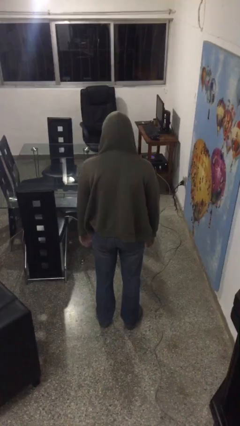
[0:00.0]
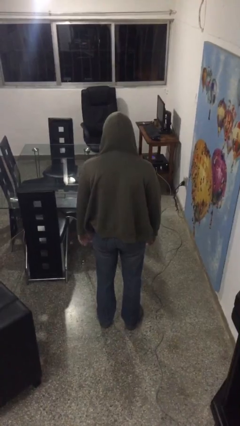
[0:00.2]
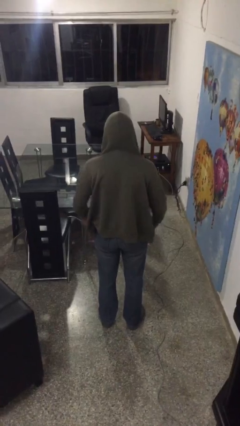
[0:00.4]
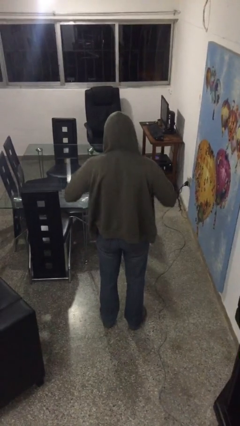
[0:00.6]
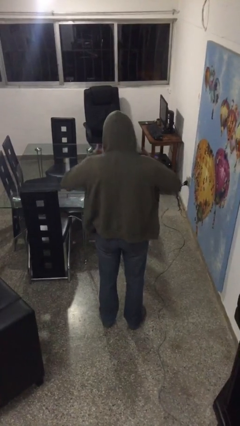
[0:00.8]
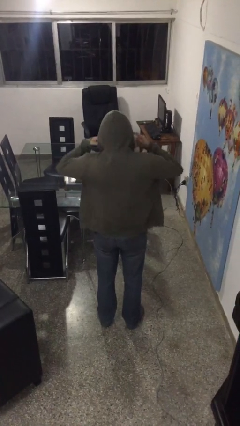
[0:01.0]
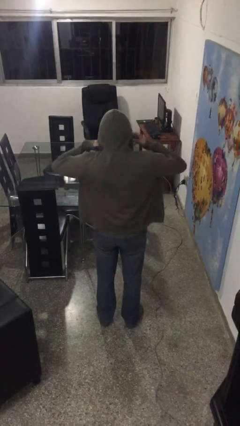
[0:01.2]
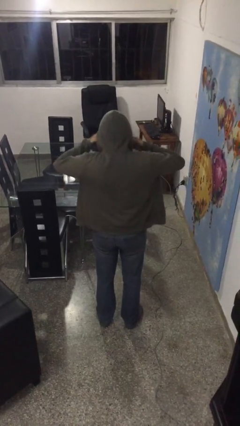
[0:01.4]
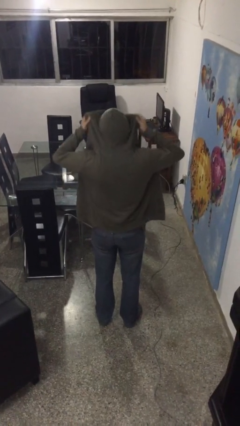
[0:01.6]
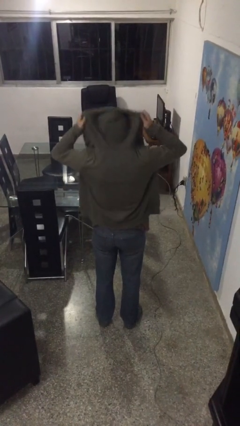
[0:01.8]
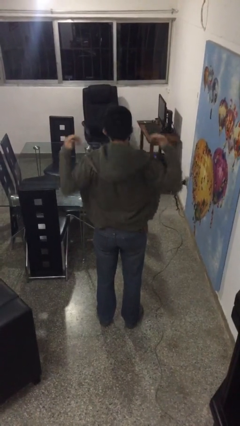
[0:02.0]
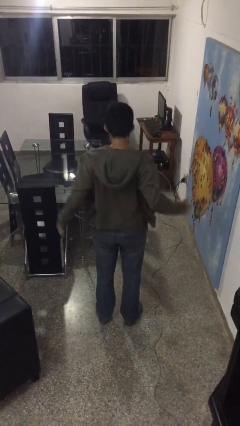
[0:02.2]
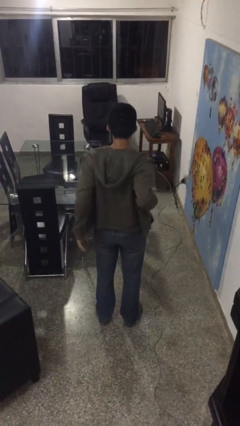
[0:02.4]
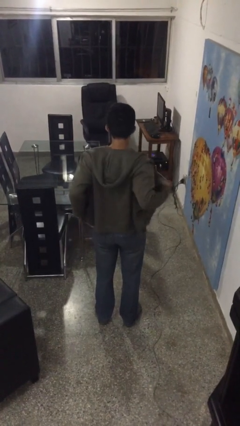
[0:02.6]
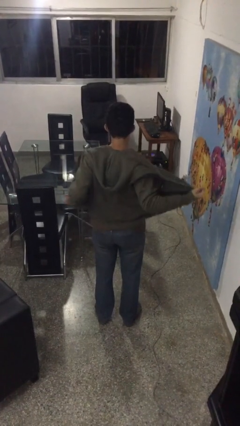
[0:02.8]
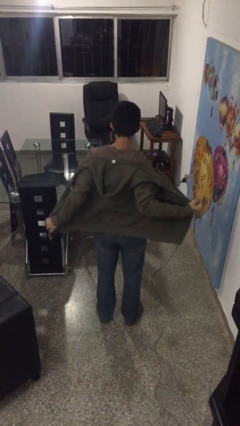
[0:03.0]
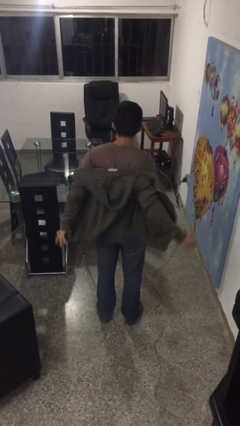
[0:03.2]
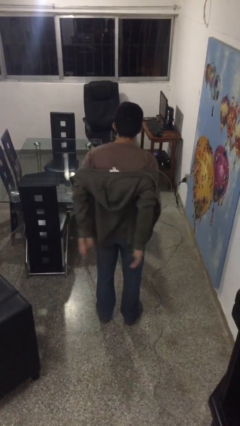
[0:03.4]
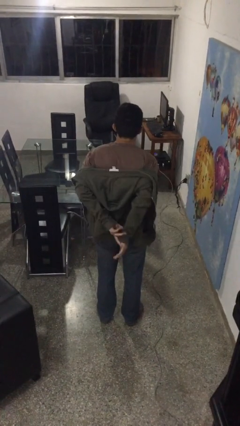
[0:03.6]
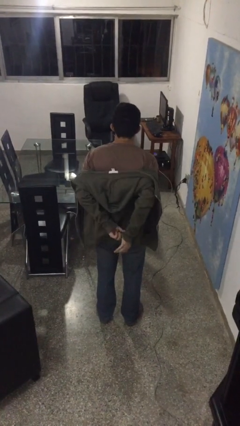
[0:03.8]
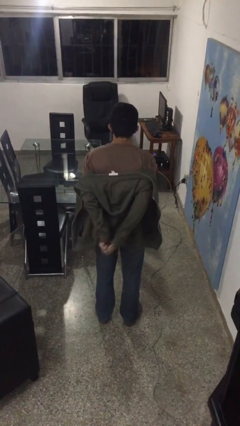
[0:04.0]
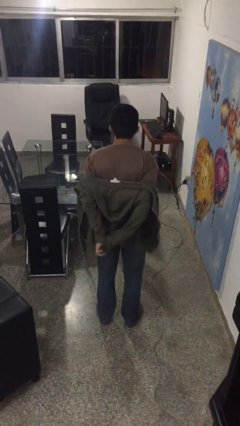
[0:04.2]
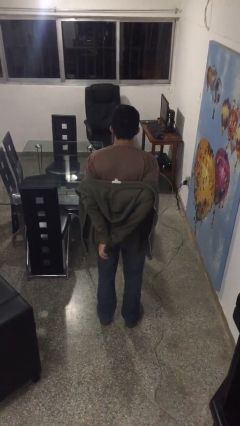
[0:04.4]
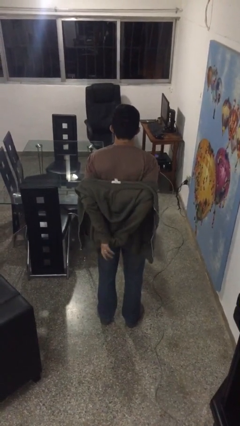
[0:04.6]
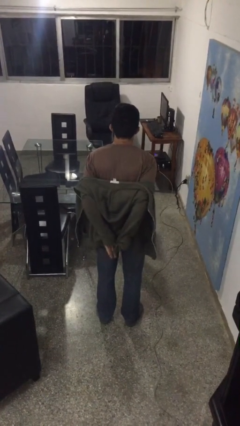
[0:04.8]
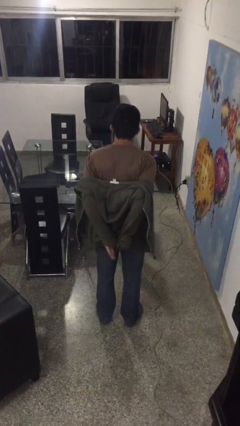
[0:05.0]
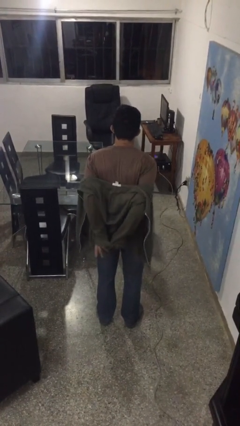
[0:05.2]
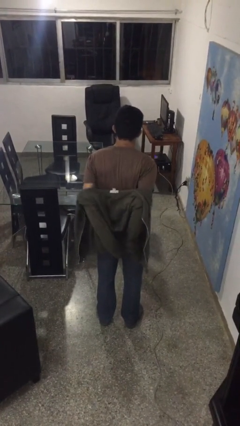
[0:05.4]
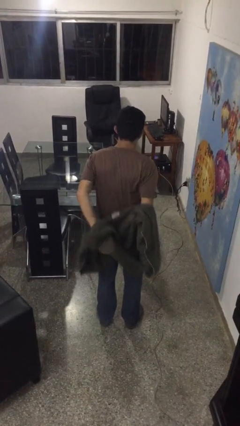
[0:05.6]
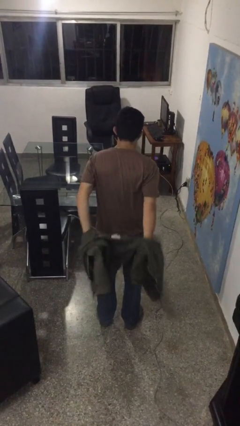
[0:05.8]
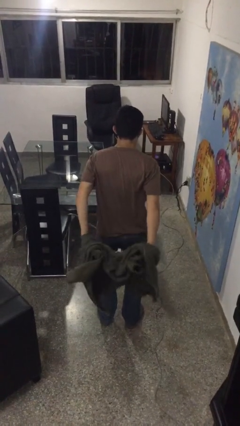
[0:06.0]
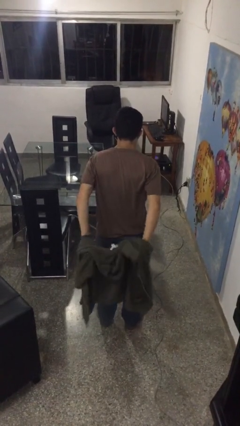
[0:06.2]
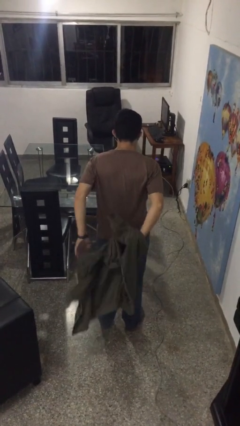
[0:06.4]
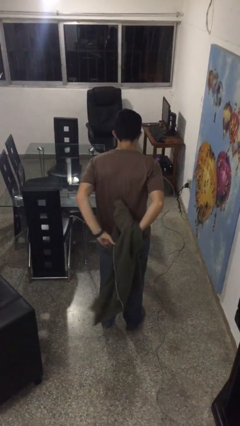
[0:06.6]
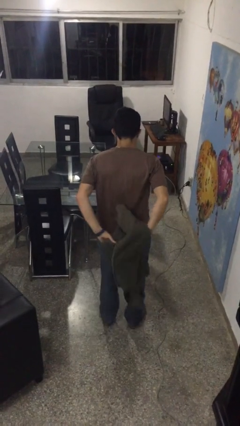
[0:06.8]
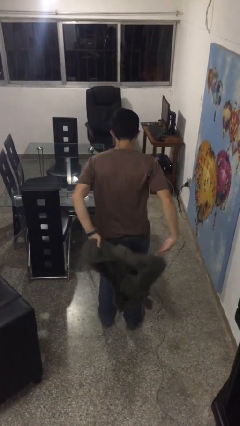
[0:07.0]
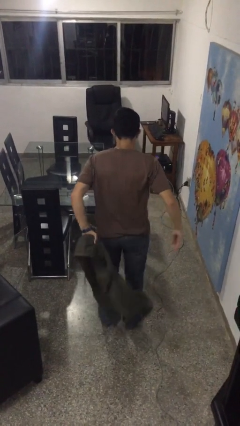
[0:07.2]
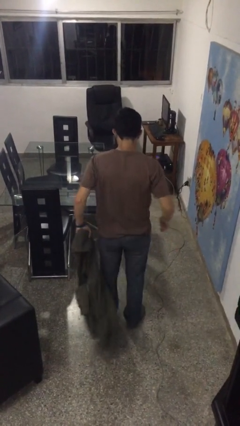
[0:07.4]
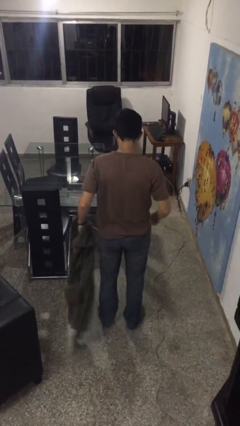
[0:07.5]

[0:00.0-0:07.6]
person takes off hoodie

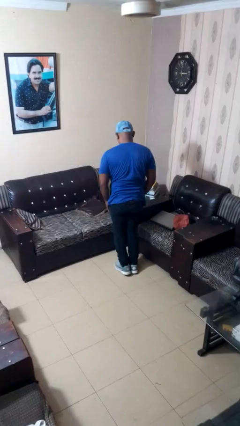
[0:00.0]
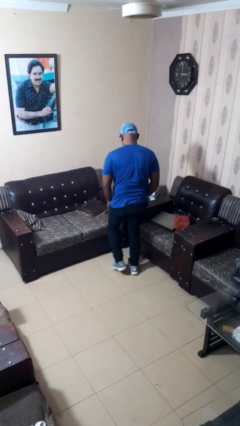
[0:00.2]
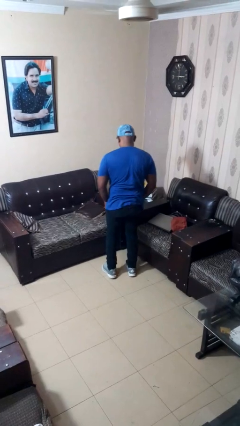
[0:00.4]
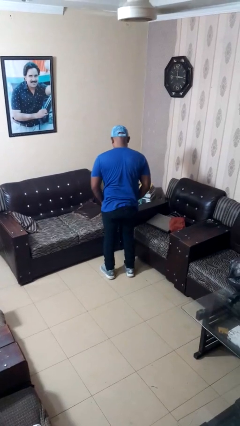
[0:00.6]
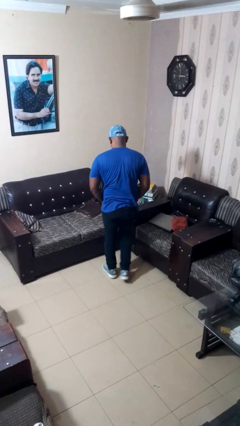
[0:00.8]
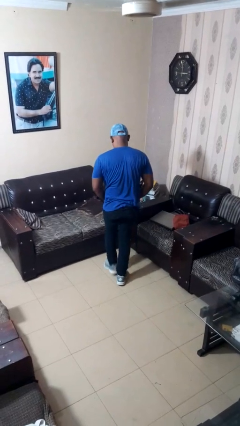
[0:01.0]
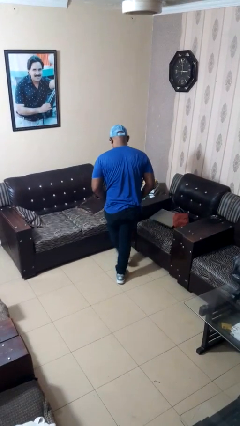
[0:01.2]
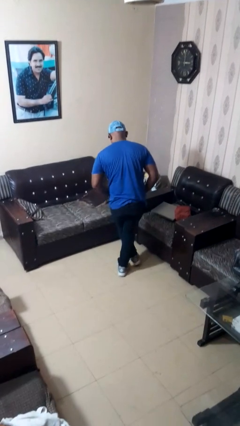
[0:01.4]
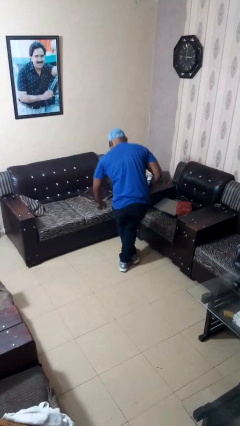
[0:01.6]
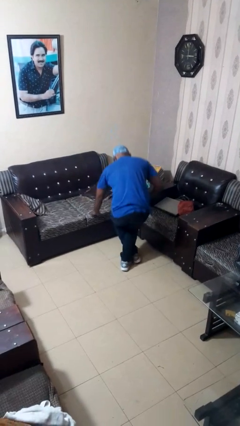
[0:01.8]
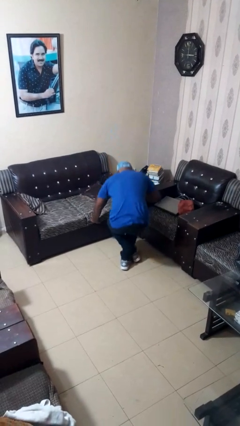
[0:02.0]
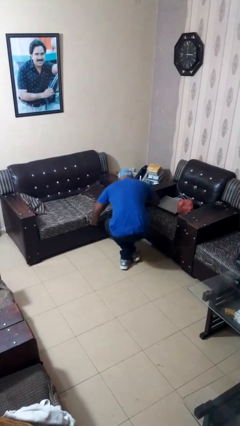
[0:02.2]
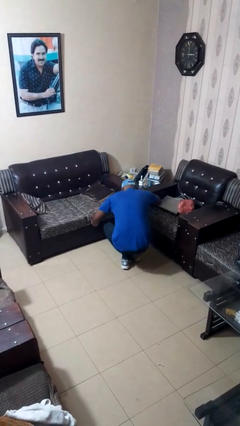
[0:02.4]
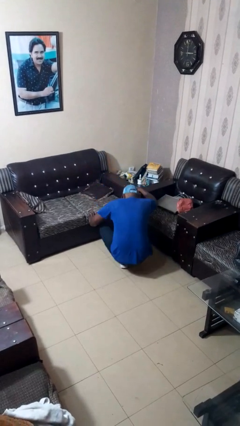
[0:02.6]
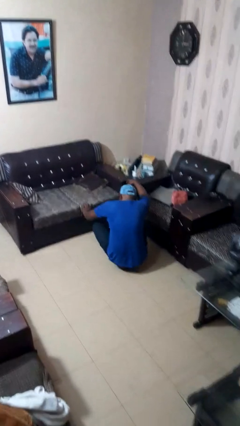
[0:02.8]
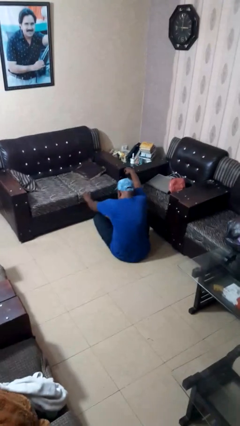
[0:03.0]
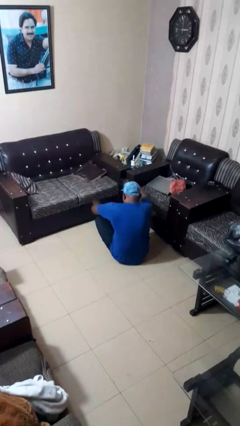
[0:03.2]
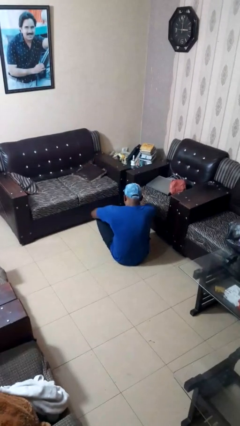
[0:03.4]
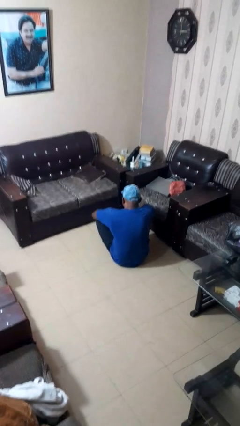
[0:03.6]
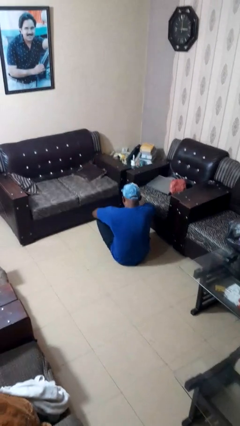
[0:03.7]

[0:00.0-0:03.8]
person sits crisscross

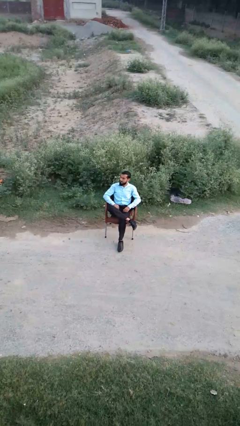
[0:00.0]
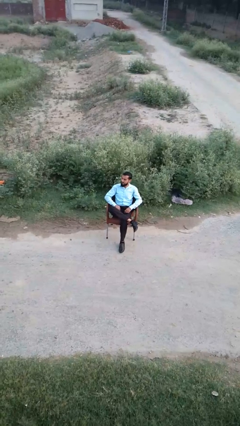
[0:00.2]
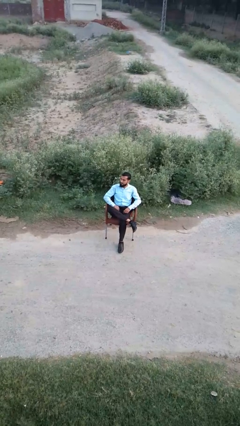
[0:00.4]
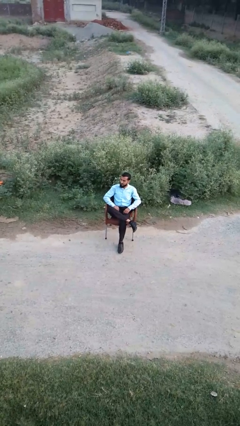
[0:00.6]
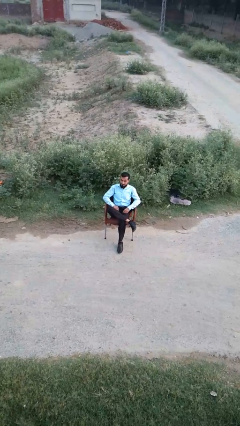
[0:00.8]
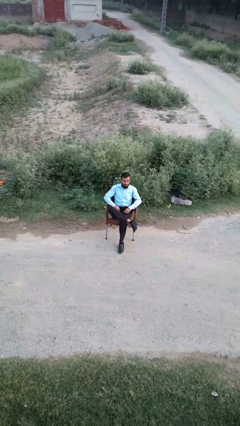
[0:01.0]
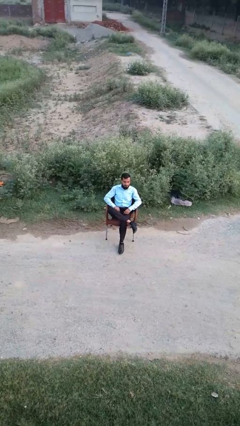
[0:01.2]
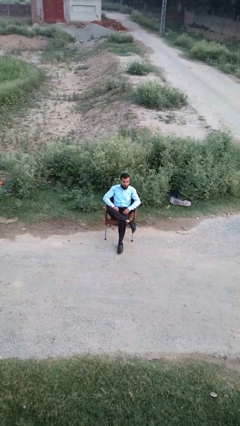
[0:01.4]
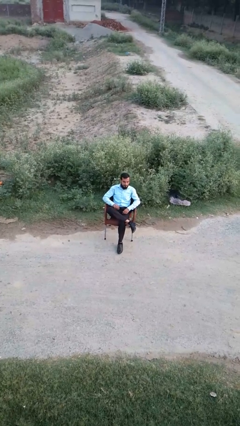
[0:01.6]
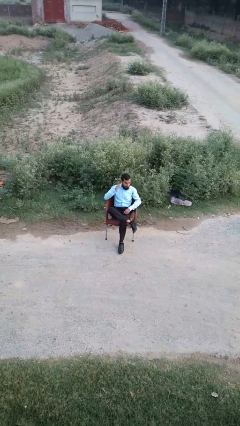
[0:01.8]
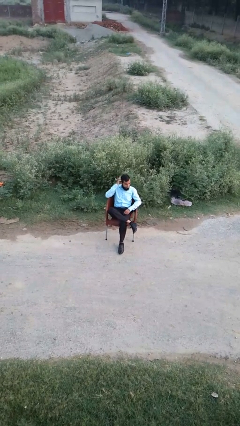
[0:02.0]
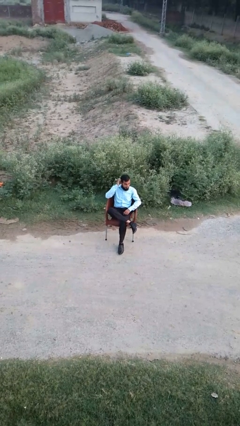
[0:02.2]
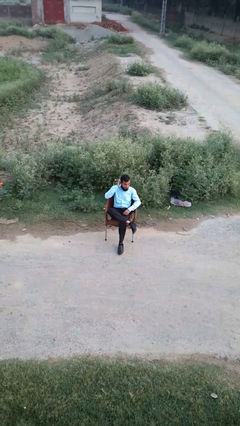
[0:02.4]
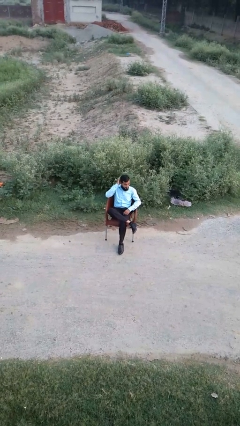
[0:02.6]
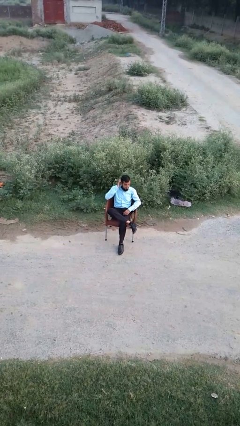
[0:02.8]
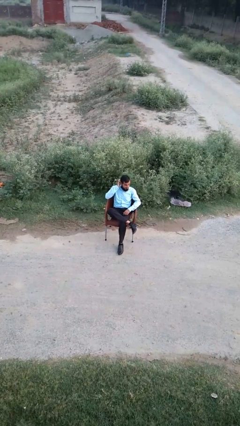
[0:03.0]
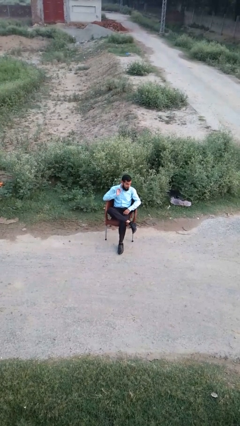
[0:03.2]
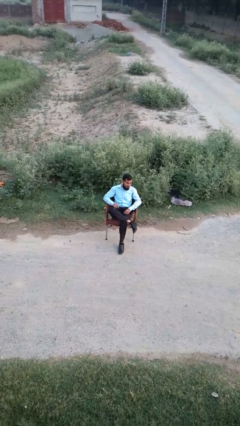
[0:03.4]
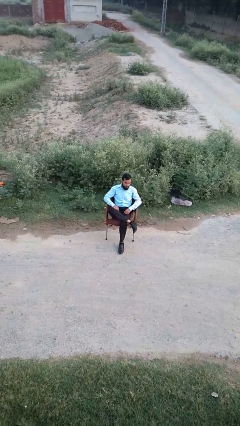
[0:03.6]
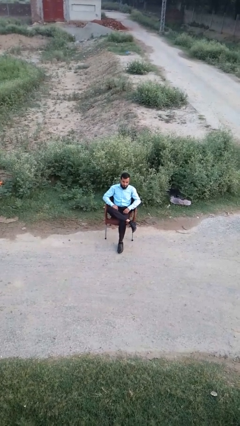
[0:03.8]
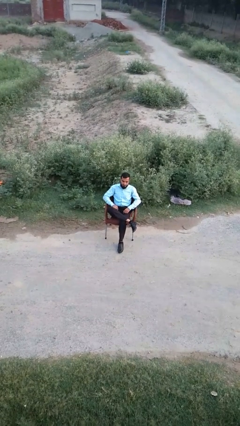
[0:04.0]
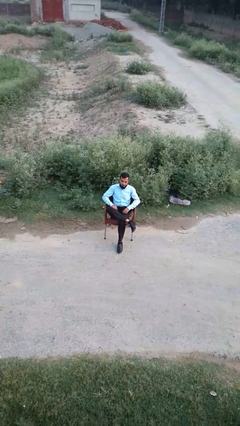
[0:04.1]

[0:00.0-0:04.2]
person scratches face

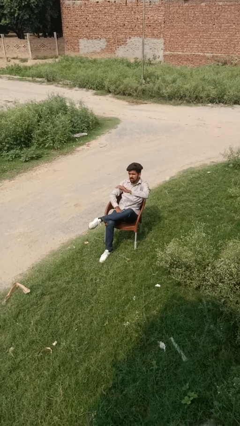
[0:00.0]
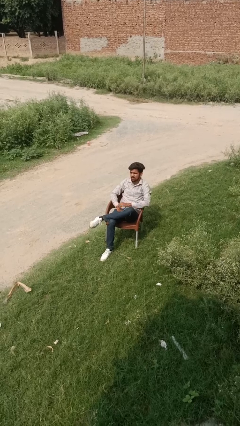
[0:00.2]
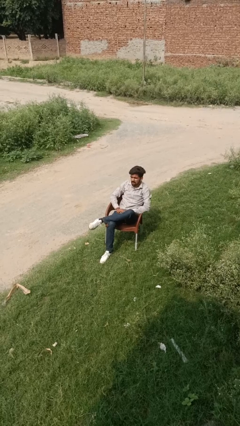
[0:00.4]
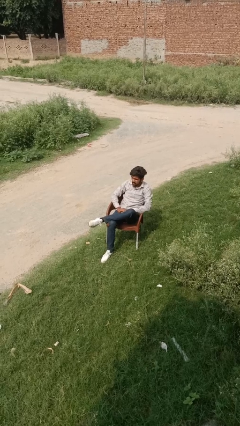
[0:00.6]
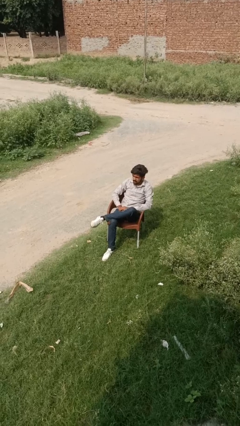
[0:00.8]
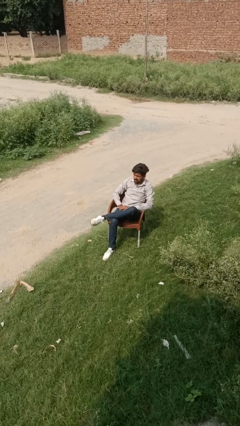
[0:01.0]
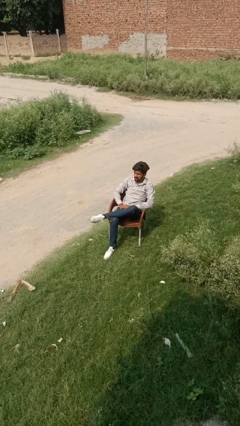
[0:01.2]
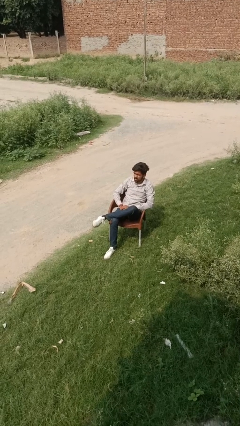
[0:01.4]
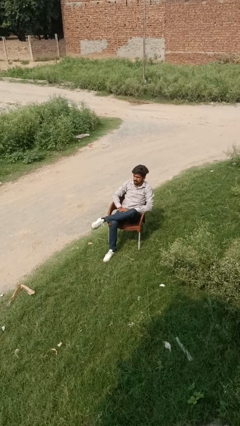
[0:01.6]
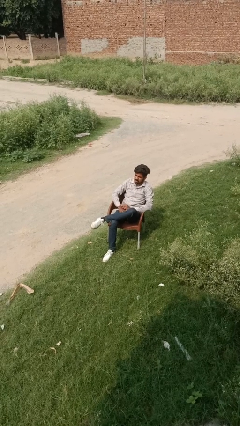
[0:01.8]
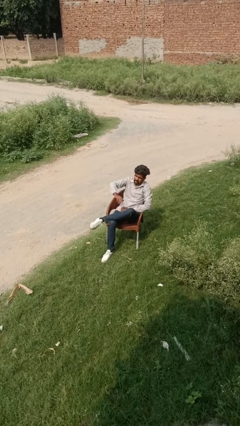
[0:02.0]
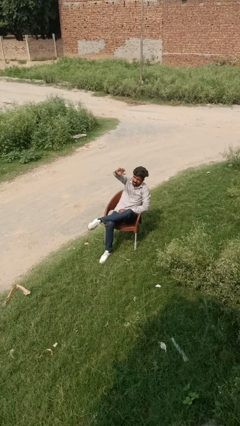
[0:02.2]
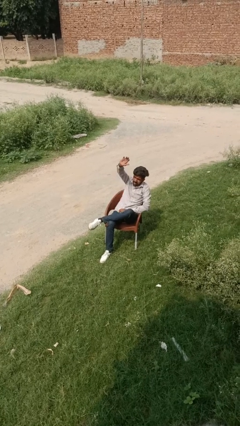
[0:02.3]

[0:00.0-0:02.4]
person gestures lower hand
